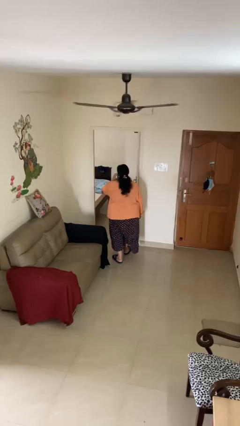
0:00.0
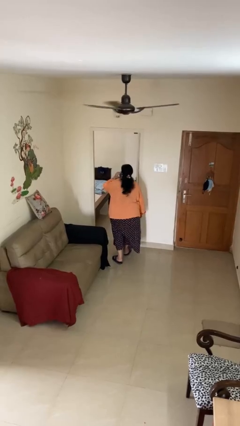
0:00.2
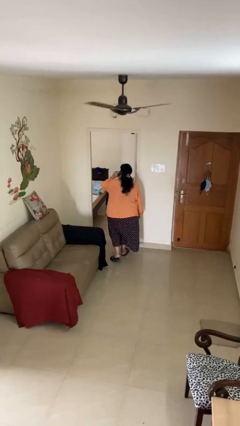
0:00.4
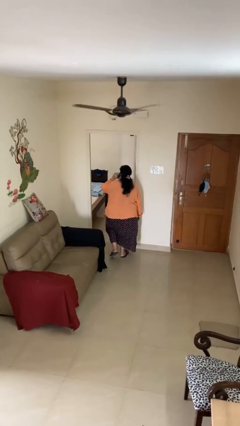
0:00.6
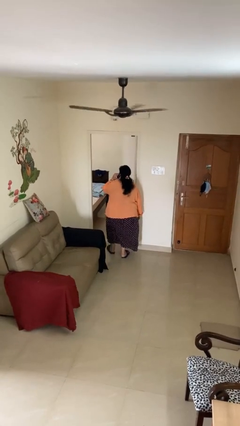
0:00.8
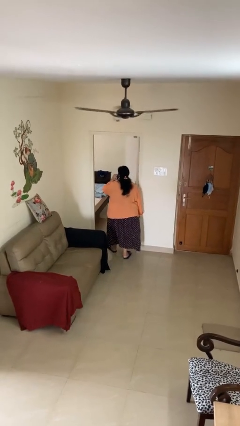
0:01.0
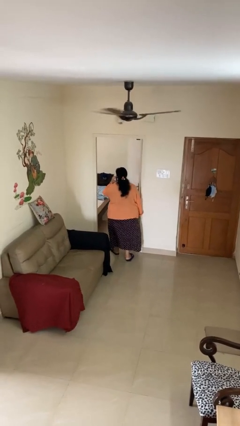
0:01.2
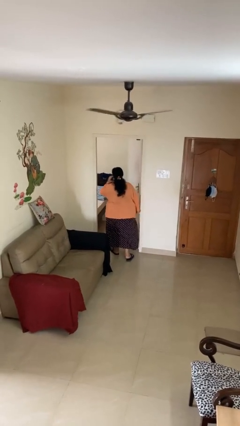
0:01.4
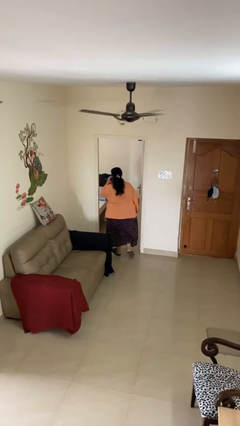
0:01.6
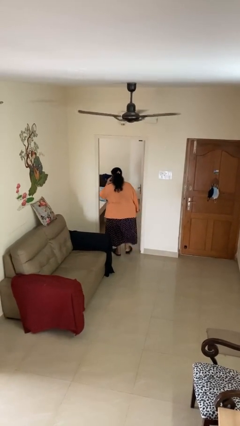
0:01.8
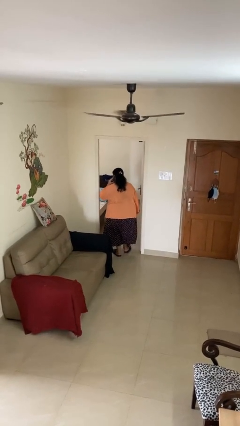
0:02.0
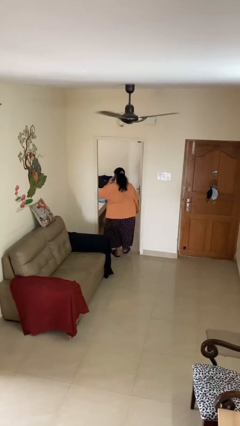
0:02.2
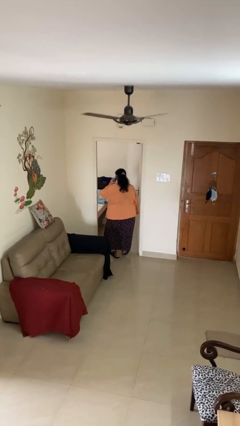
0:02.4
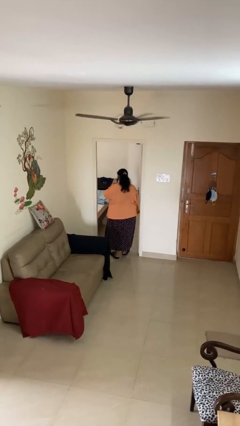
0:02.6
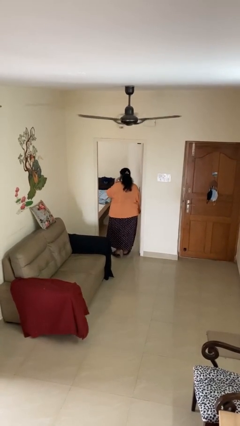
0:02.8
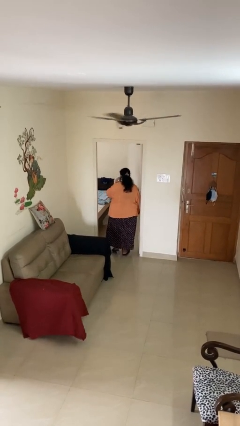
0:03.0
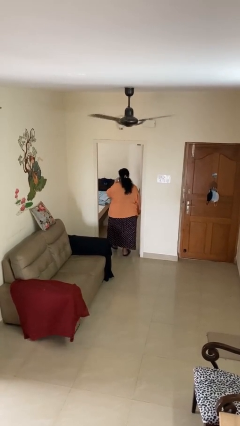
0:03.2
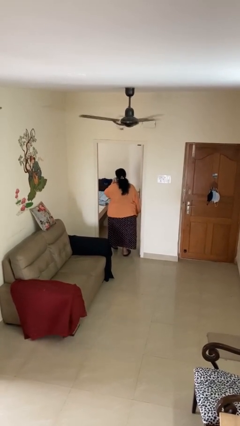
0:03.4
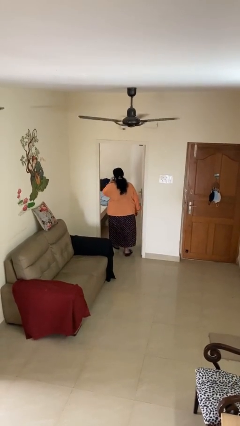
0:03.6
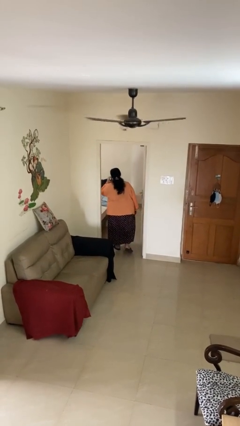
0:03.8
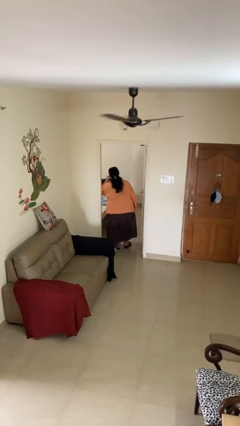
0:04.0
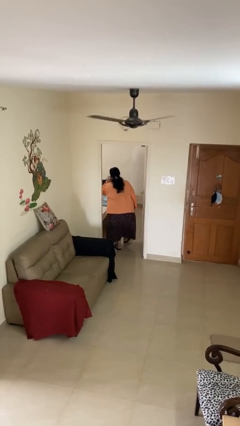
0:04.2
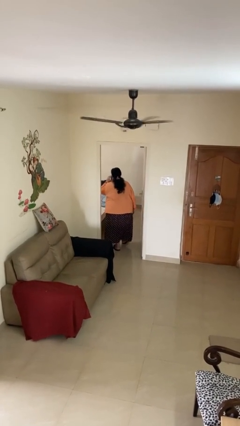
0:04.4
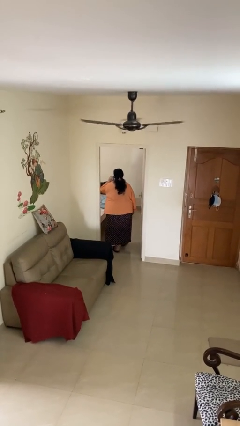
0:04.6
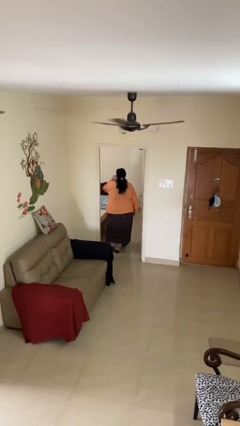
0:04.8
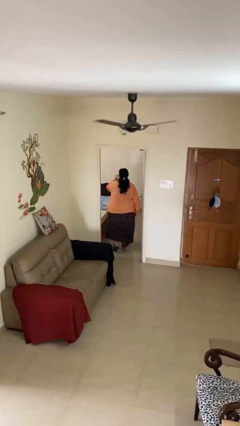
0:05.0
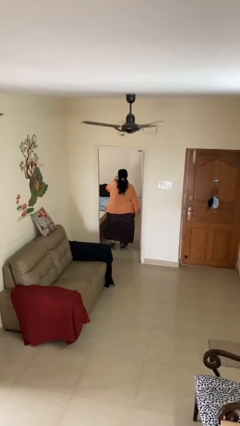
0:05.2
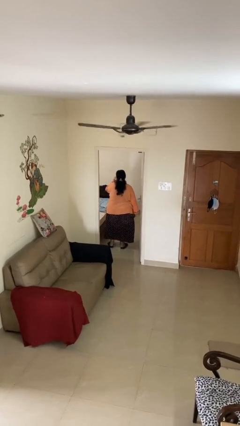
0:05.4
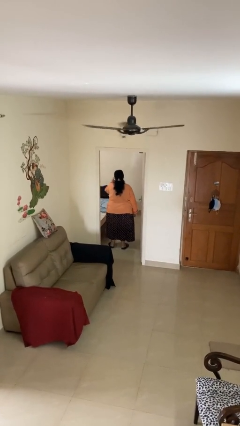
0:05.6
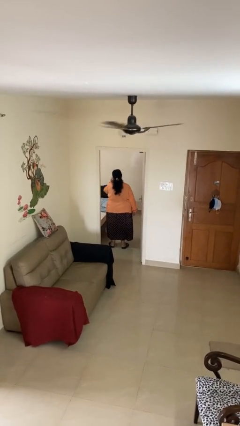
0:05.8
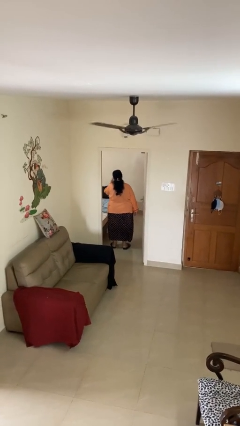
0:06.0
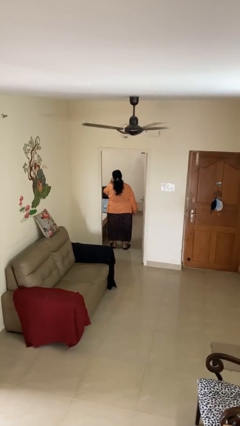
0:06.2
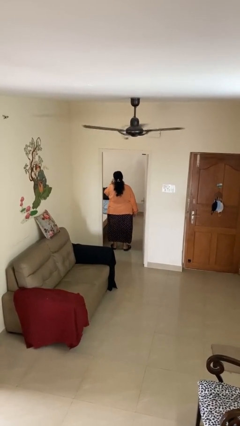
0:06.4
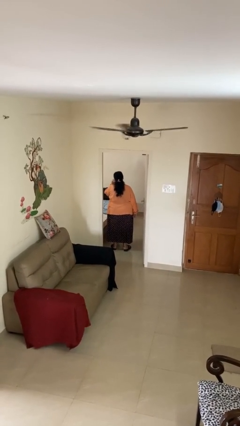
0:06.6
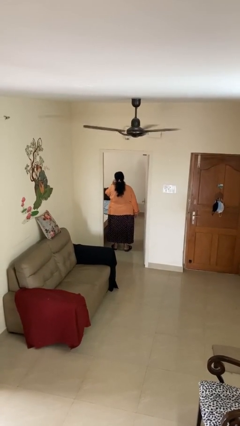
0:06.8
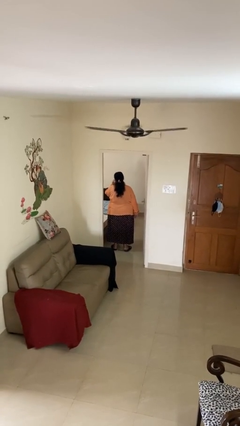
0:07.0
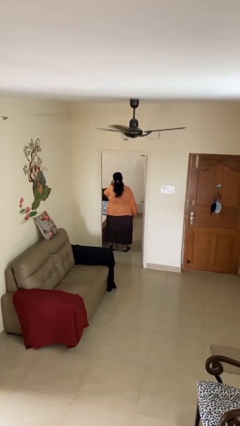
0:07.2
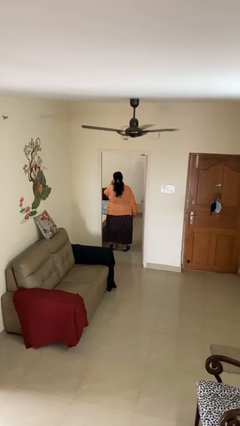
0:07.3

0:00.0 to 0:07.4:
person exits scene through structure

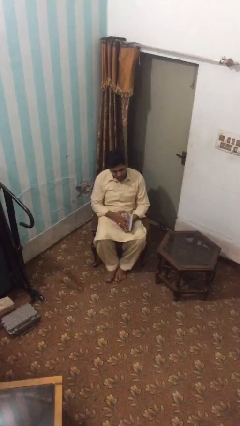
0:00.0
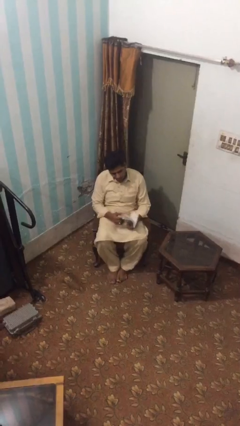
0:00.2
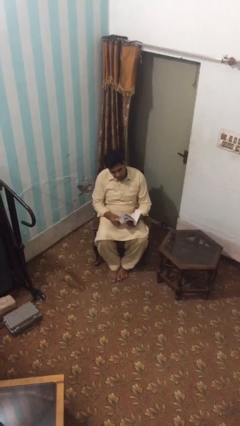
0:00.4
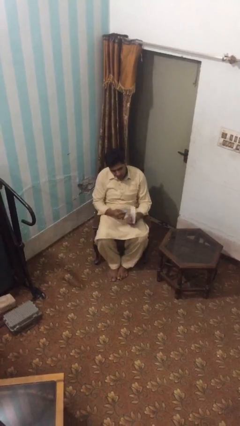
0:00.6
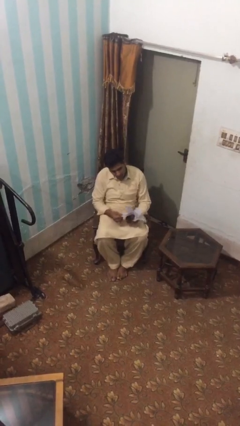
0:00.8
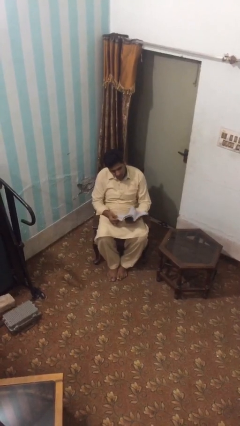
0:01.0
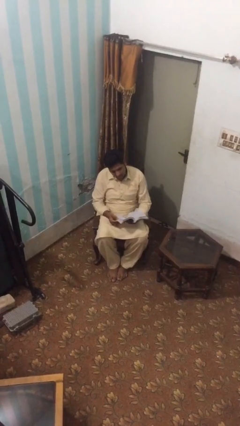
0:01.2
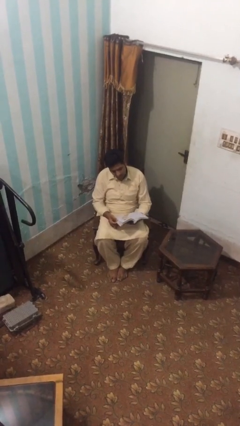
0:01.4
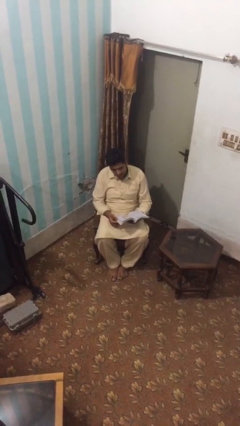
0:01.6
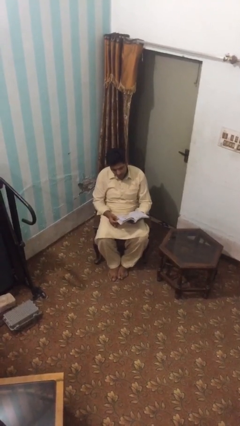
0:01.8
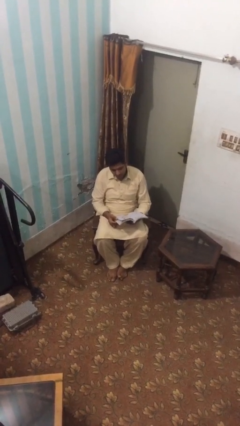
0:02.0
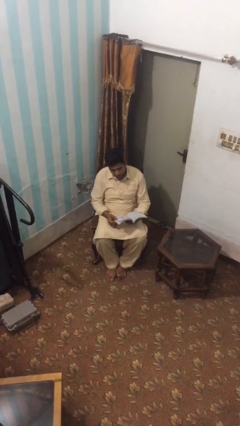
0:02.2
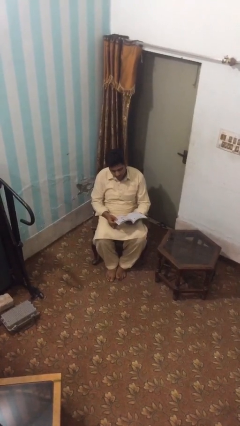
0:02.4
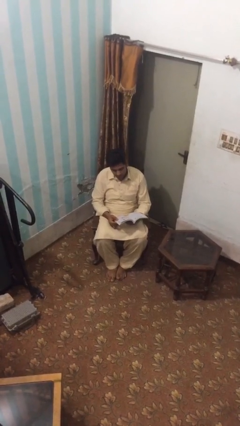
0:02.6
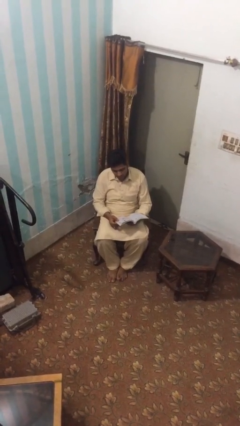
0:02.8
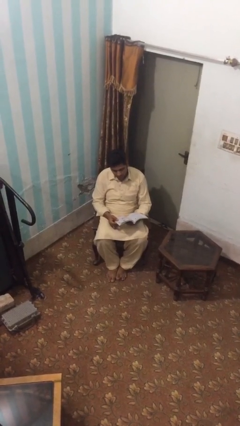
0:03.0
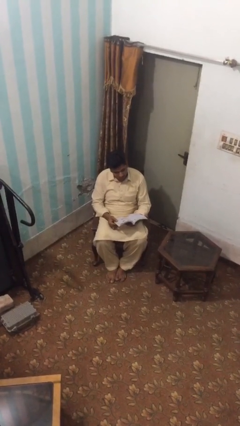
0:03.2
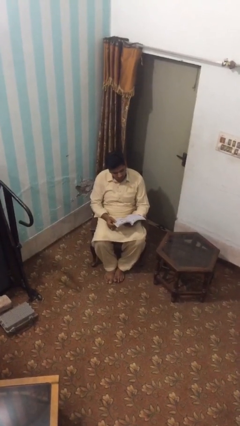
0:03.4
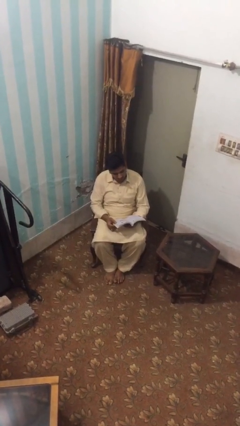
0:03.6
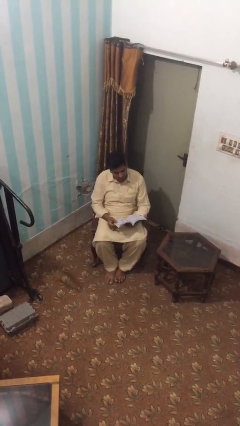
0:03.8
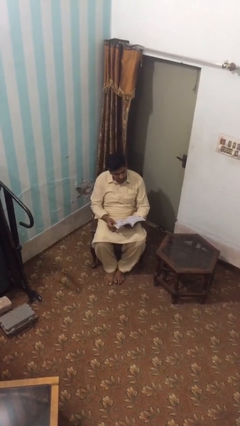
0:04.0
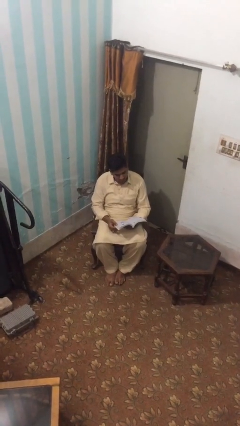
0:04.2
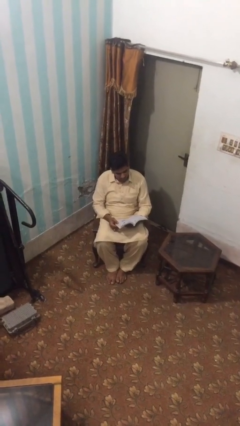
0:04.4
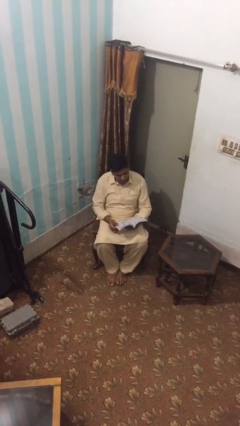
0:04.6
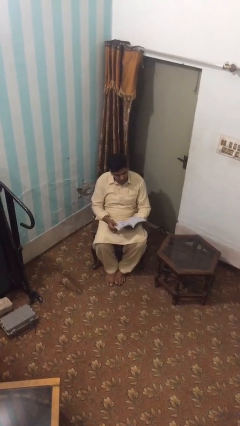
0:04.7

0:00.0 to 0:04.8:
person reads document

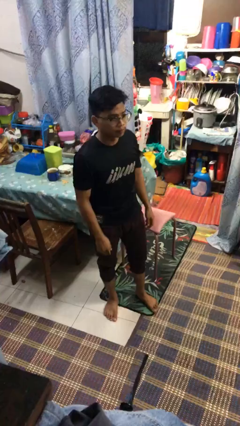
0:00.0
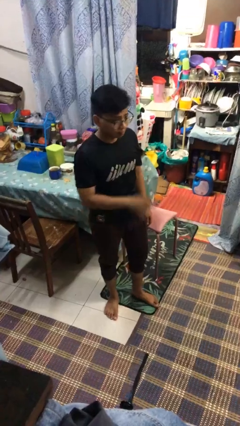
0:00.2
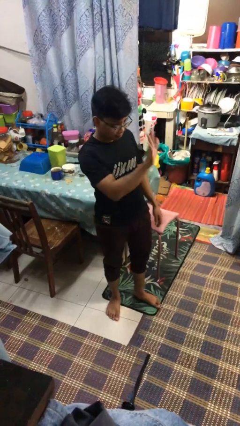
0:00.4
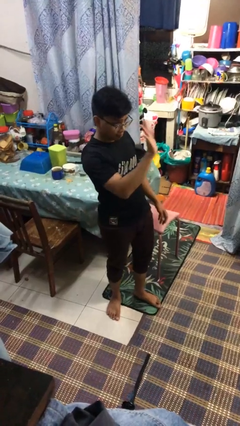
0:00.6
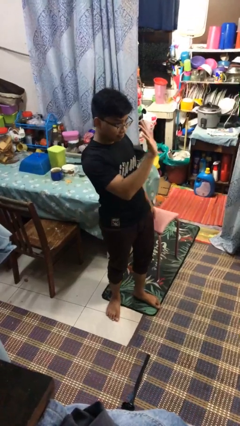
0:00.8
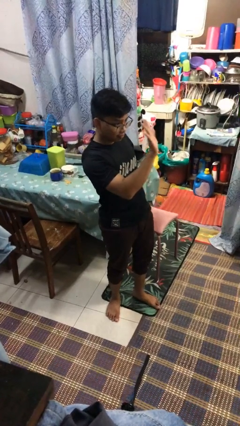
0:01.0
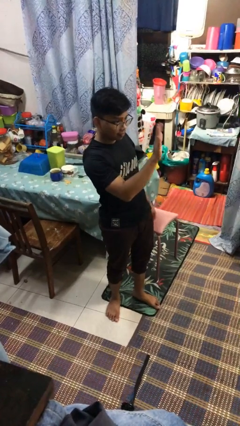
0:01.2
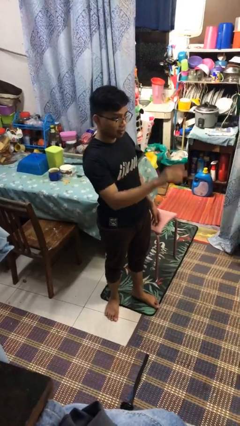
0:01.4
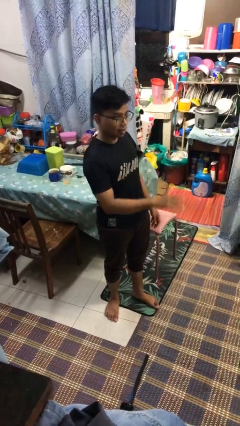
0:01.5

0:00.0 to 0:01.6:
person gestures stop

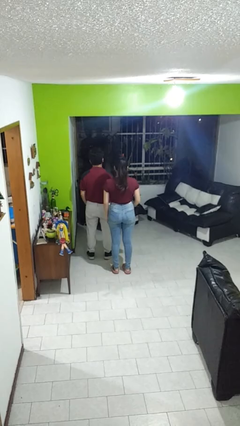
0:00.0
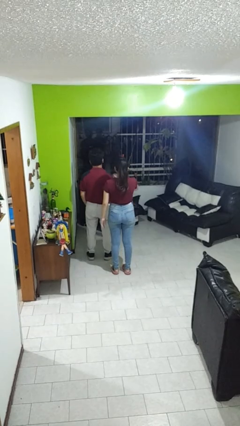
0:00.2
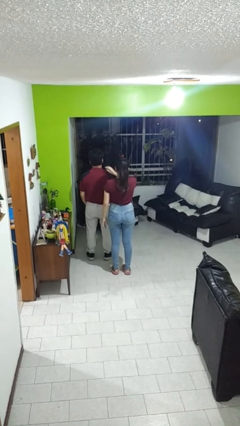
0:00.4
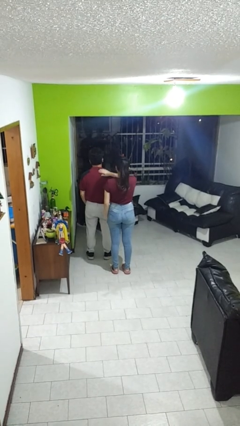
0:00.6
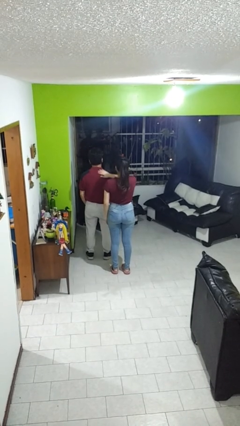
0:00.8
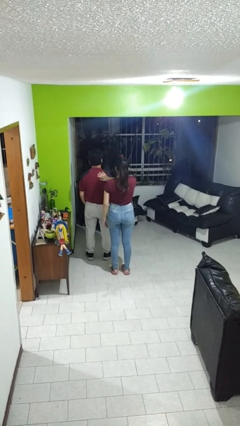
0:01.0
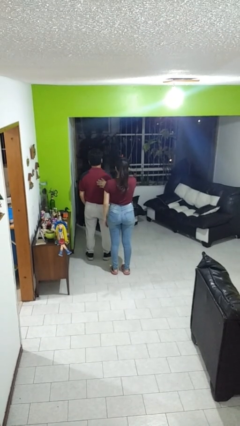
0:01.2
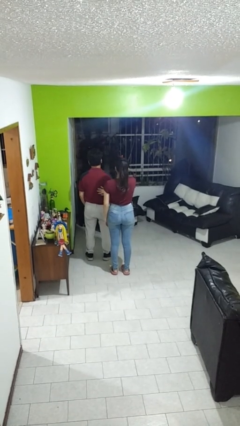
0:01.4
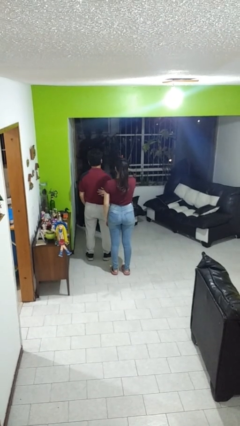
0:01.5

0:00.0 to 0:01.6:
person touches back of person

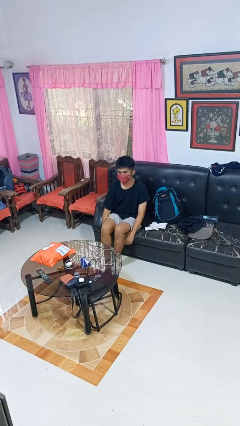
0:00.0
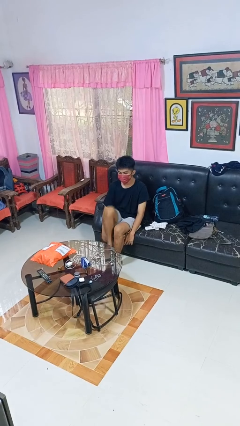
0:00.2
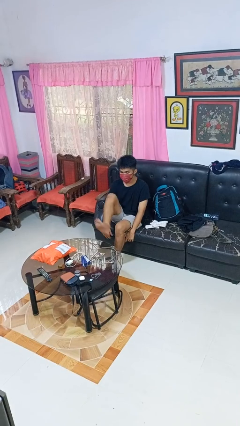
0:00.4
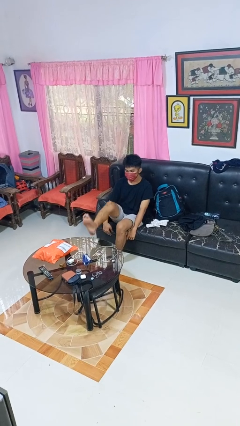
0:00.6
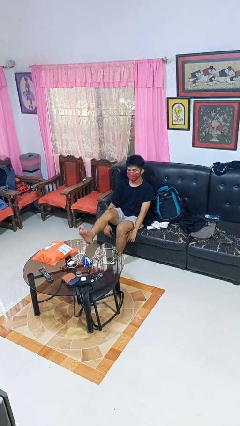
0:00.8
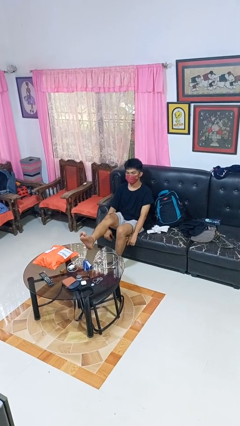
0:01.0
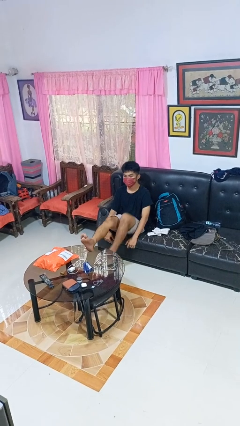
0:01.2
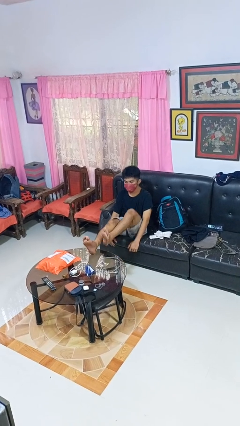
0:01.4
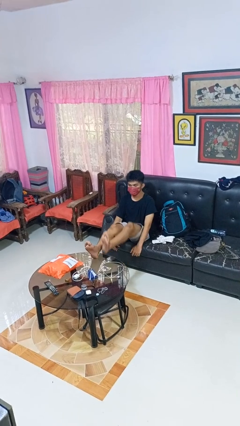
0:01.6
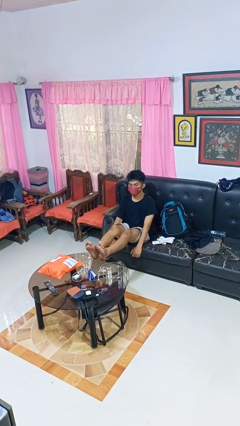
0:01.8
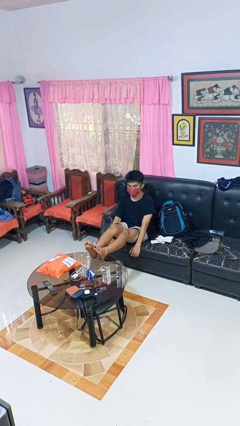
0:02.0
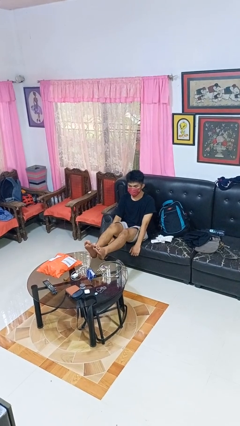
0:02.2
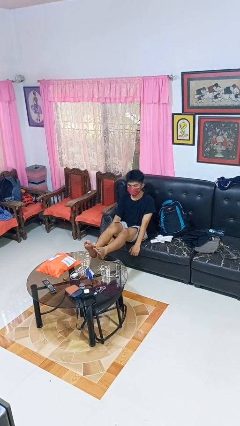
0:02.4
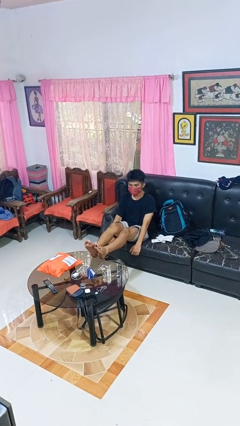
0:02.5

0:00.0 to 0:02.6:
person puts feet up
